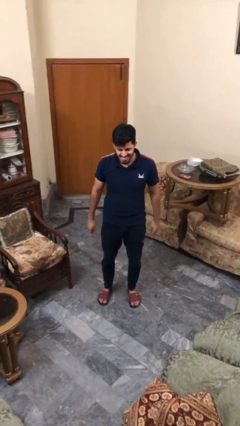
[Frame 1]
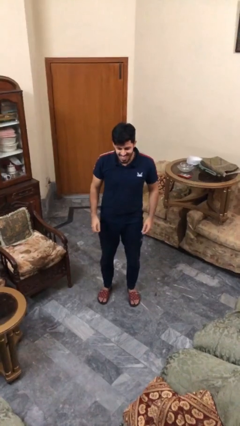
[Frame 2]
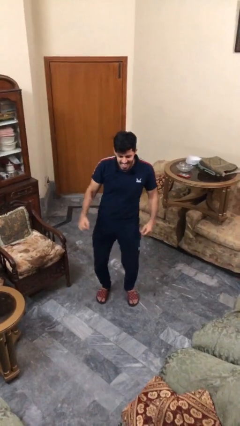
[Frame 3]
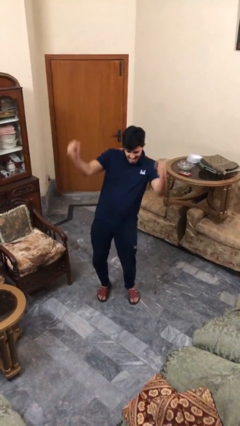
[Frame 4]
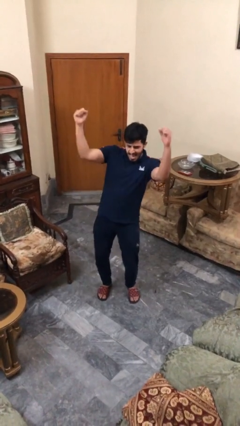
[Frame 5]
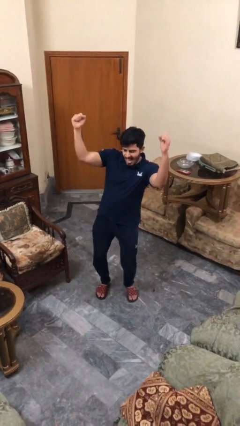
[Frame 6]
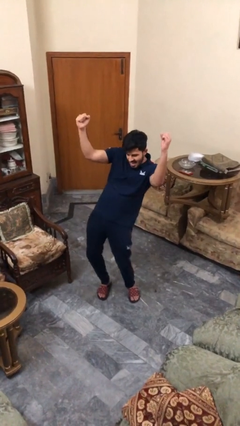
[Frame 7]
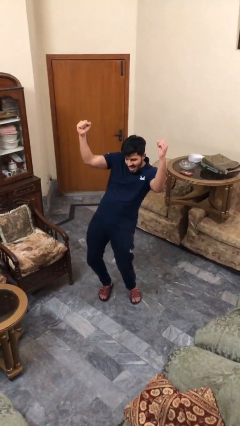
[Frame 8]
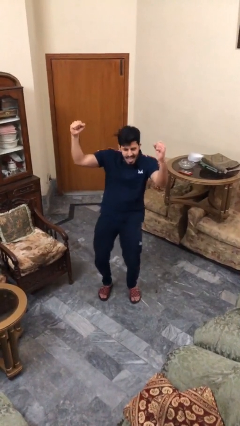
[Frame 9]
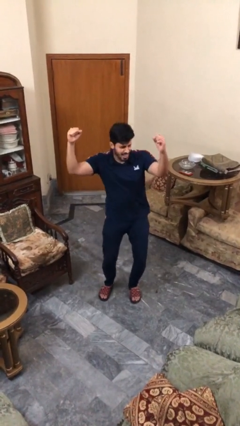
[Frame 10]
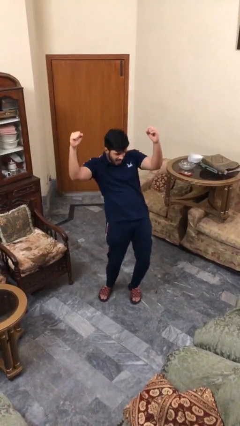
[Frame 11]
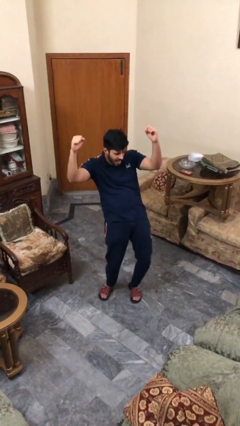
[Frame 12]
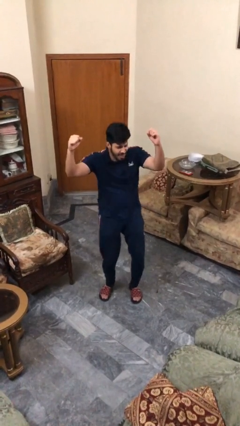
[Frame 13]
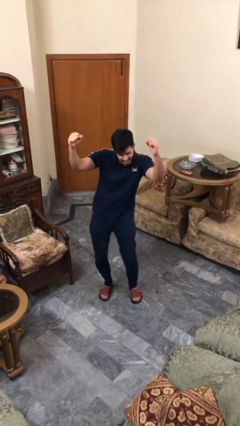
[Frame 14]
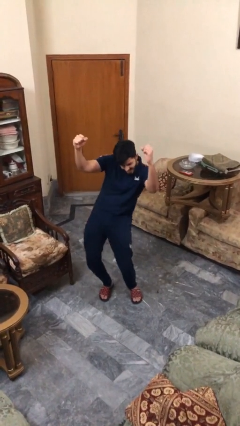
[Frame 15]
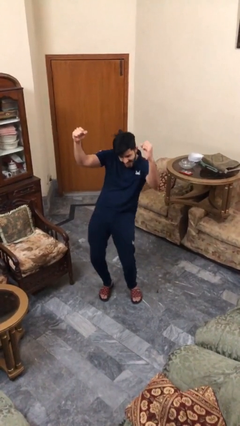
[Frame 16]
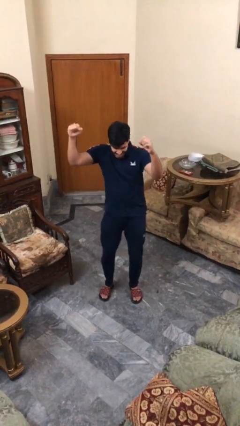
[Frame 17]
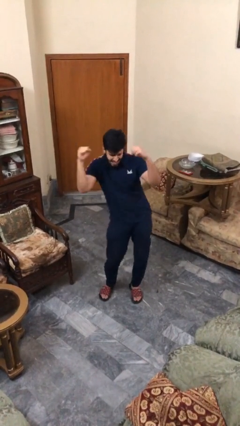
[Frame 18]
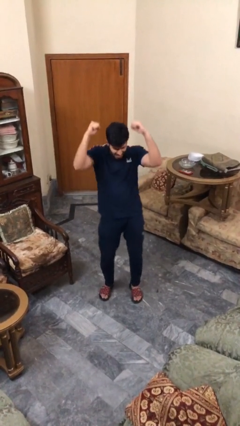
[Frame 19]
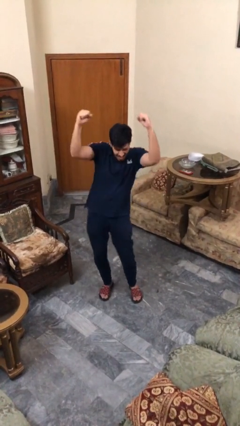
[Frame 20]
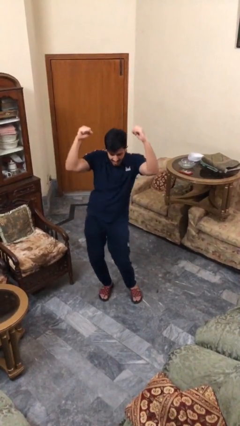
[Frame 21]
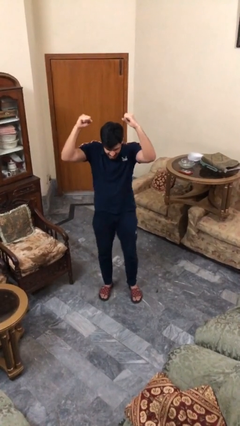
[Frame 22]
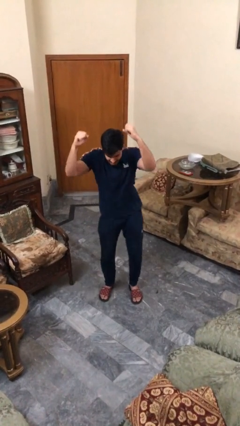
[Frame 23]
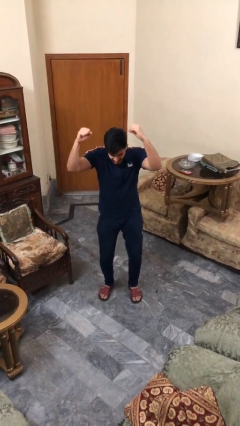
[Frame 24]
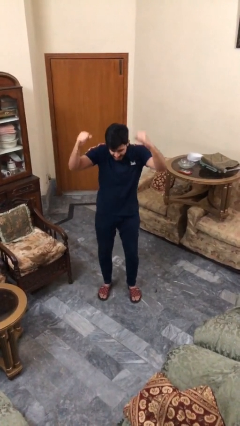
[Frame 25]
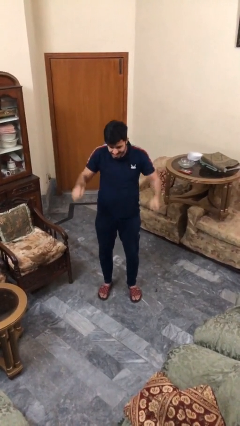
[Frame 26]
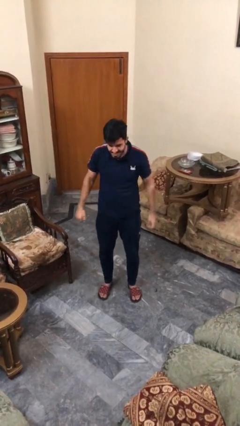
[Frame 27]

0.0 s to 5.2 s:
person dances in place

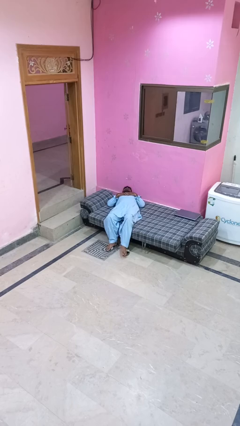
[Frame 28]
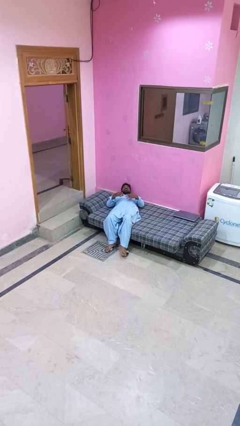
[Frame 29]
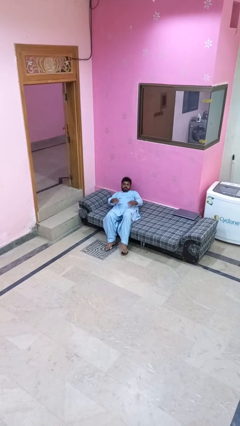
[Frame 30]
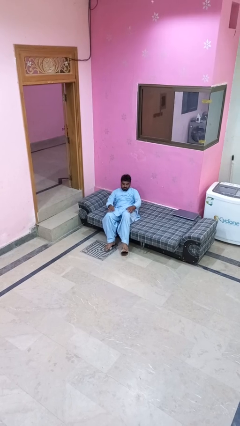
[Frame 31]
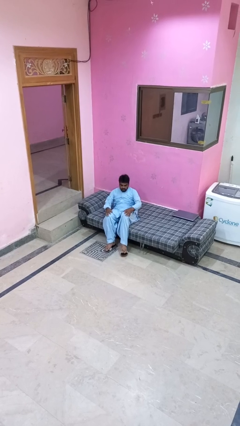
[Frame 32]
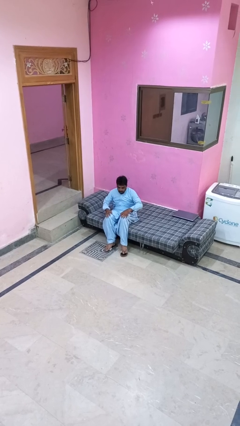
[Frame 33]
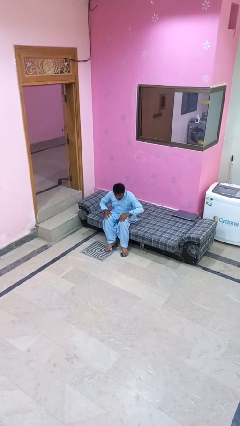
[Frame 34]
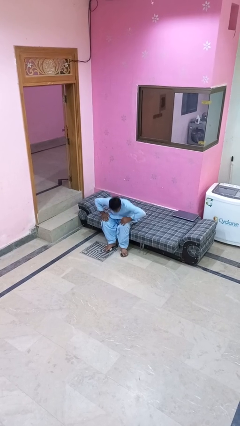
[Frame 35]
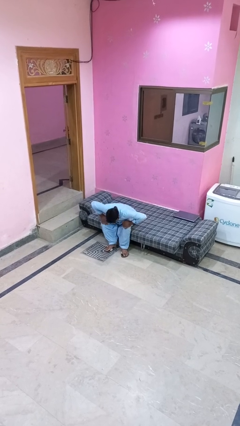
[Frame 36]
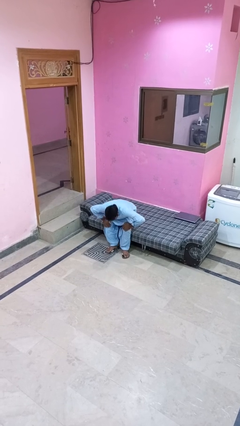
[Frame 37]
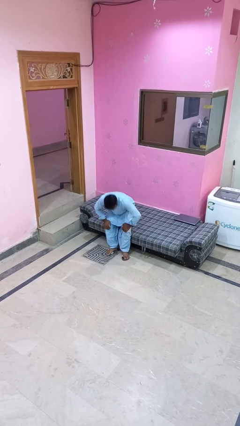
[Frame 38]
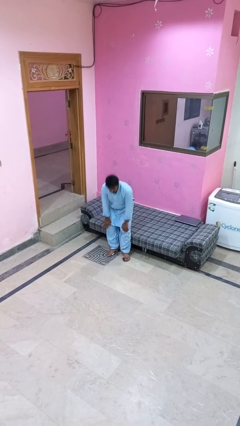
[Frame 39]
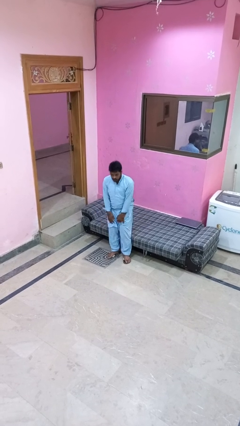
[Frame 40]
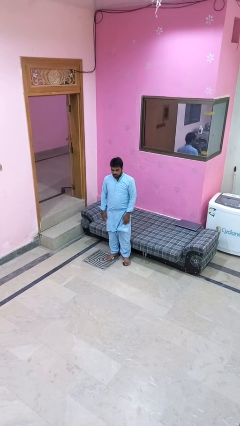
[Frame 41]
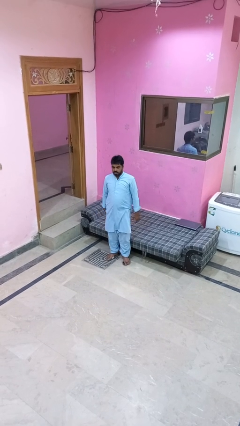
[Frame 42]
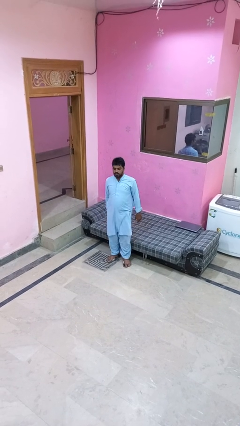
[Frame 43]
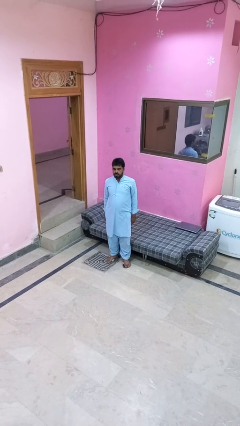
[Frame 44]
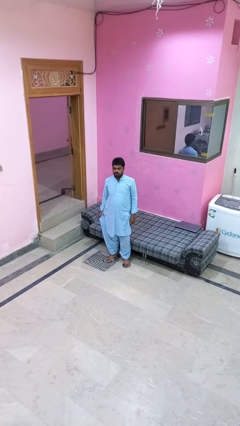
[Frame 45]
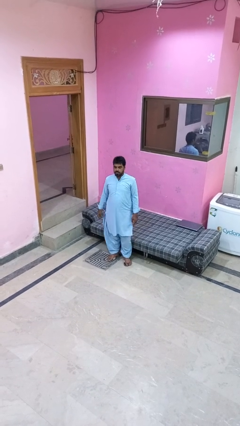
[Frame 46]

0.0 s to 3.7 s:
person stands up

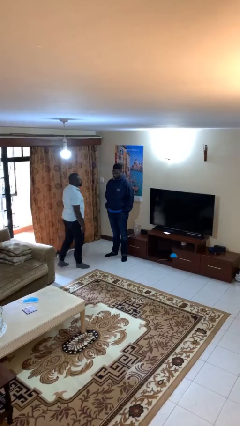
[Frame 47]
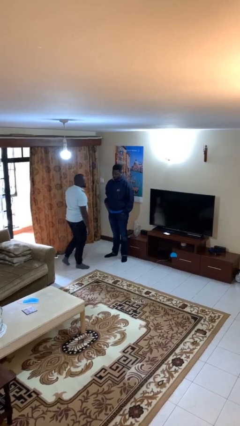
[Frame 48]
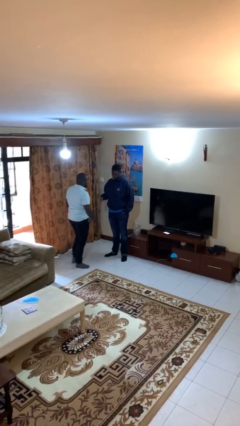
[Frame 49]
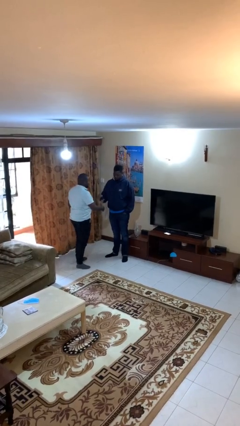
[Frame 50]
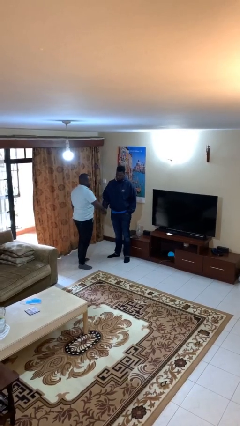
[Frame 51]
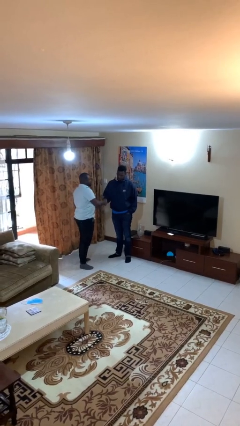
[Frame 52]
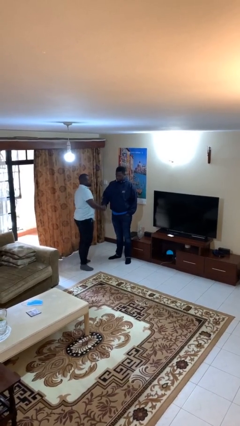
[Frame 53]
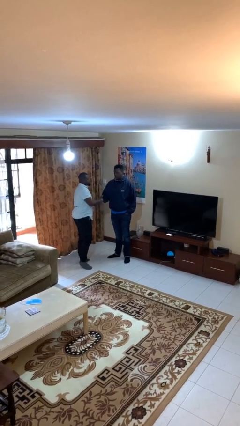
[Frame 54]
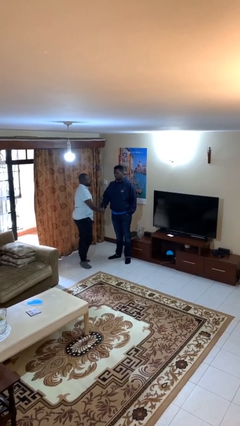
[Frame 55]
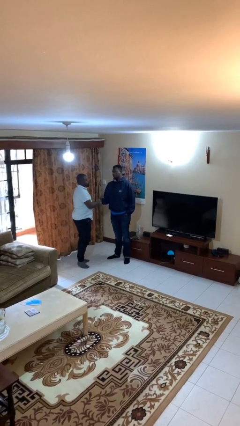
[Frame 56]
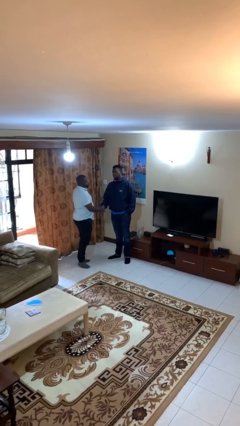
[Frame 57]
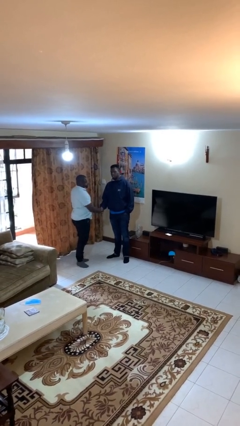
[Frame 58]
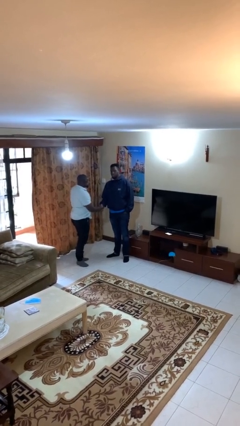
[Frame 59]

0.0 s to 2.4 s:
person shakes hand

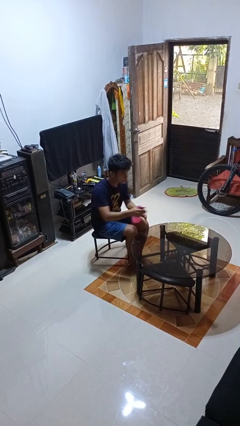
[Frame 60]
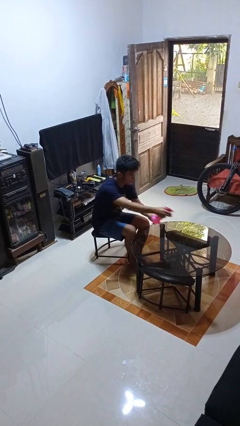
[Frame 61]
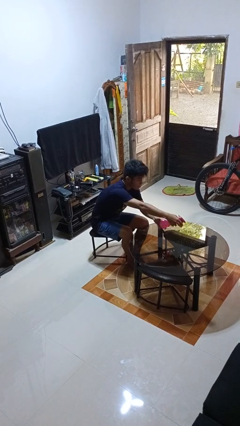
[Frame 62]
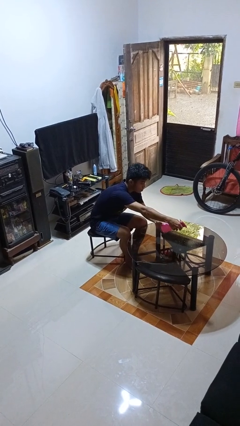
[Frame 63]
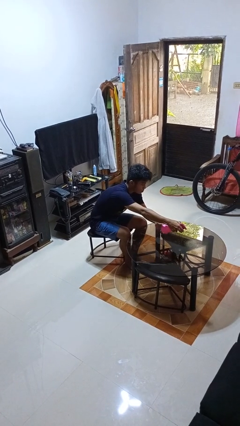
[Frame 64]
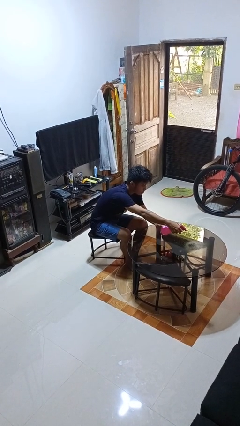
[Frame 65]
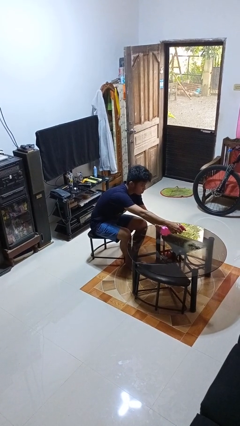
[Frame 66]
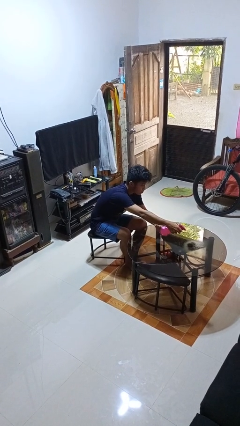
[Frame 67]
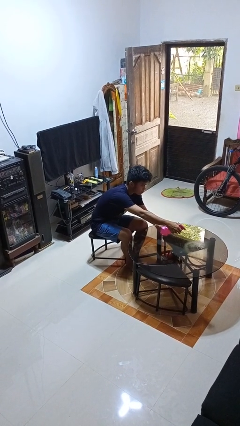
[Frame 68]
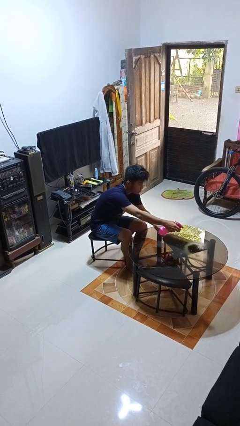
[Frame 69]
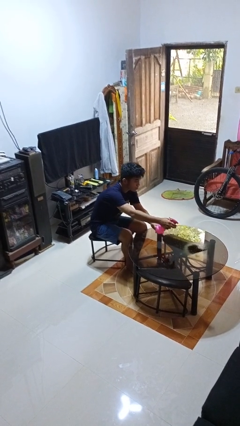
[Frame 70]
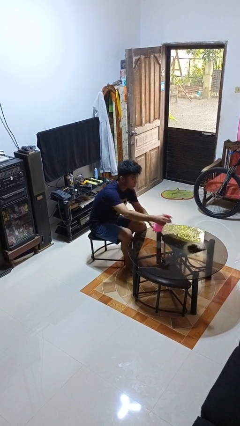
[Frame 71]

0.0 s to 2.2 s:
person sprays from bottle

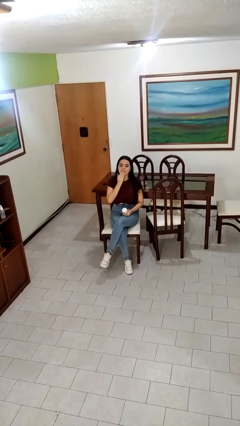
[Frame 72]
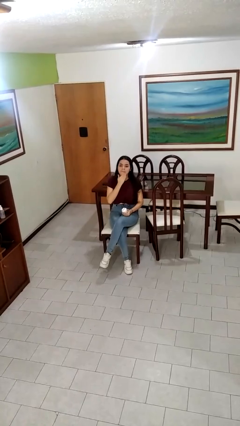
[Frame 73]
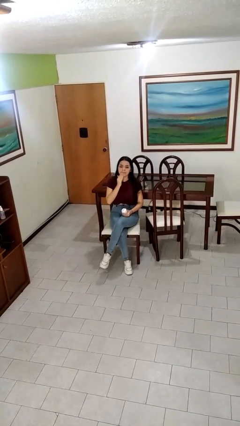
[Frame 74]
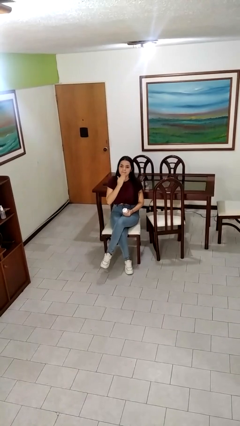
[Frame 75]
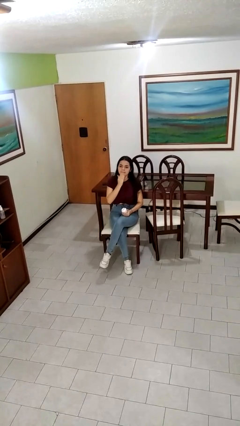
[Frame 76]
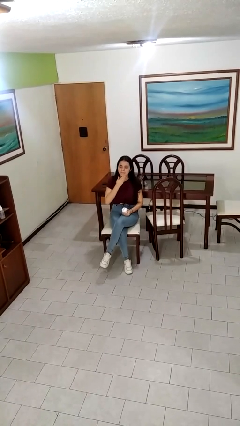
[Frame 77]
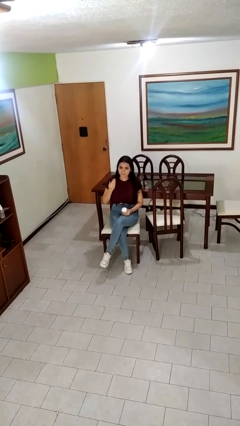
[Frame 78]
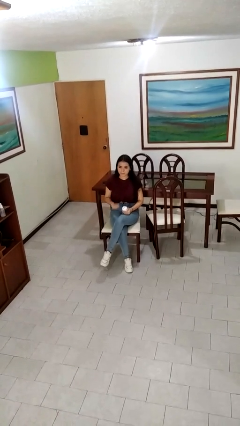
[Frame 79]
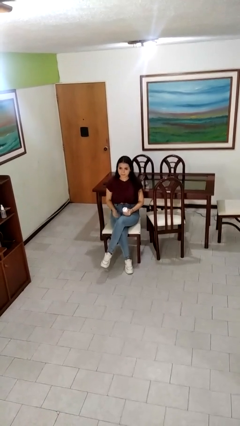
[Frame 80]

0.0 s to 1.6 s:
person applies facial moisturizer

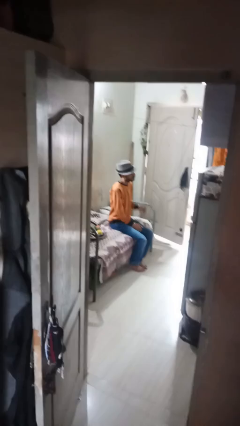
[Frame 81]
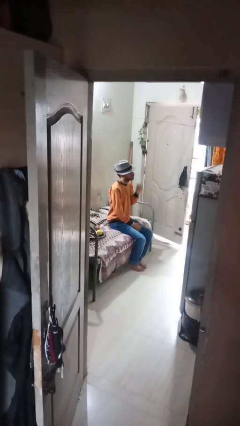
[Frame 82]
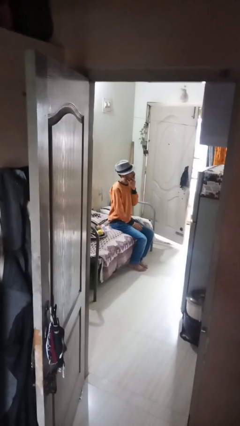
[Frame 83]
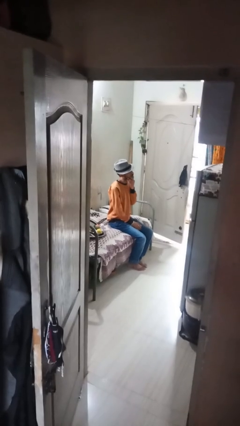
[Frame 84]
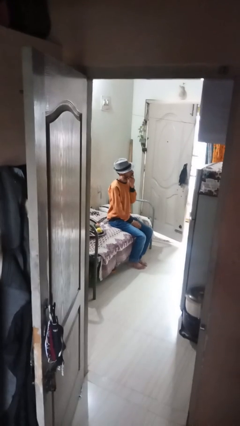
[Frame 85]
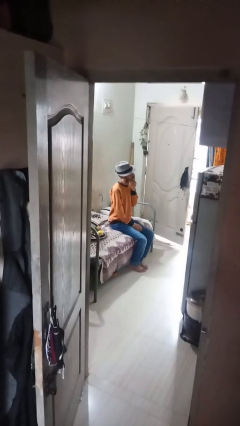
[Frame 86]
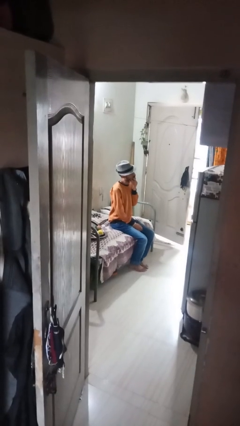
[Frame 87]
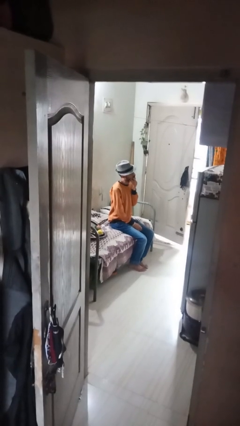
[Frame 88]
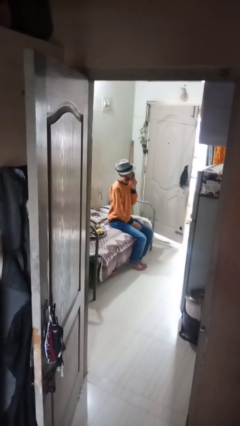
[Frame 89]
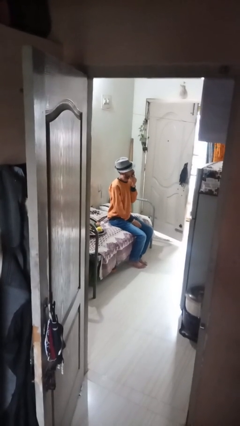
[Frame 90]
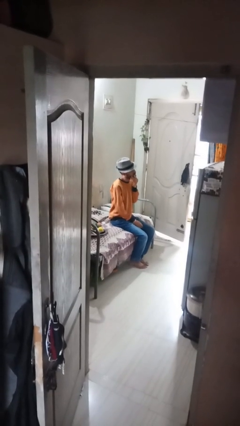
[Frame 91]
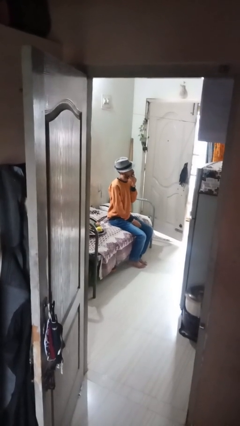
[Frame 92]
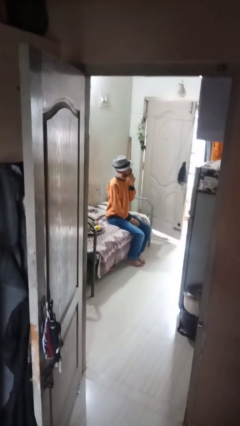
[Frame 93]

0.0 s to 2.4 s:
person strokes chin
